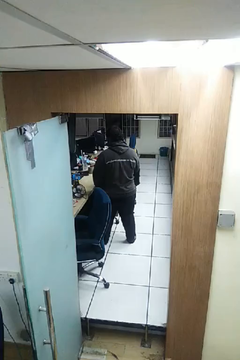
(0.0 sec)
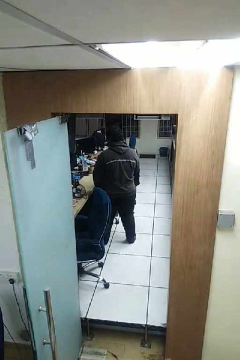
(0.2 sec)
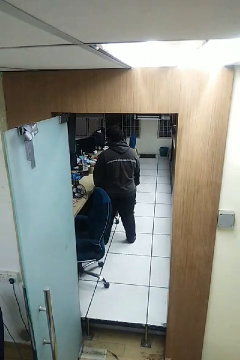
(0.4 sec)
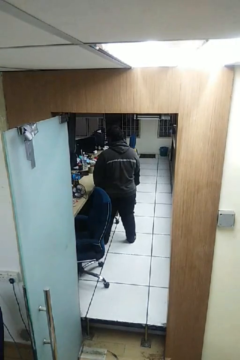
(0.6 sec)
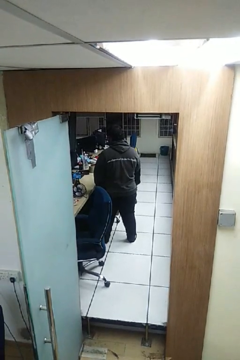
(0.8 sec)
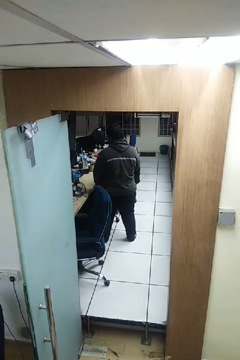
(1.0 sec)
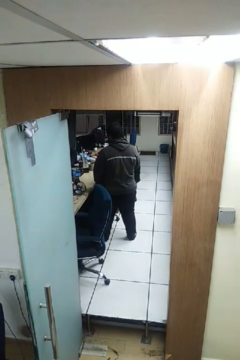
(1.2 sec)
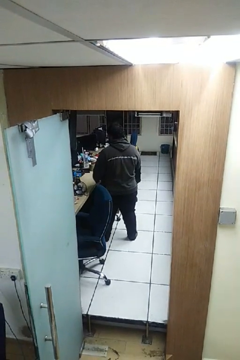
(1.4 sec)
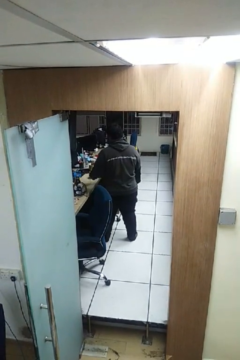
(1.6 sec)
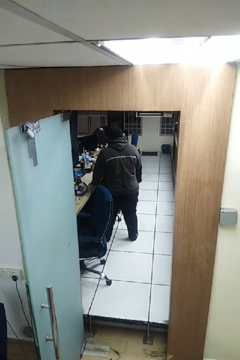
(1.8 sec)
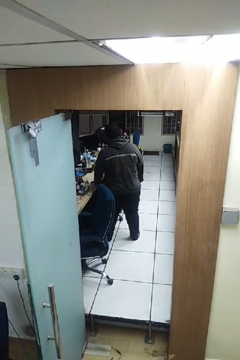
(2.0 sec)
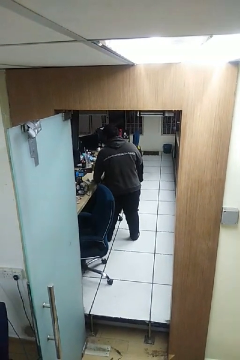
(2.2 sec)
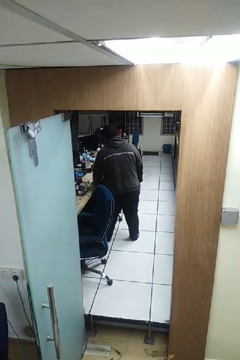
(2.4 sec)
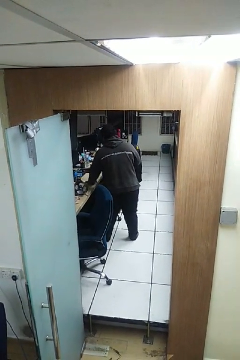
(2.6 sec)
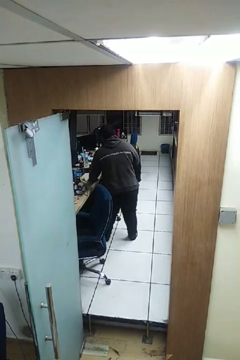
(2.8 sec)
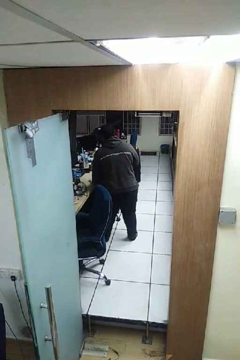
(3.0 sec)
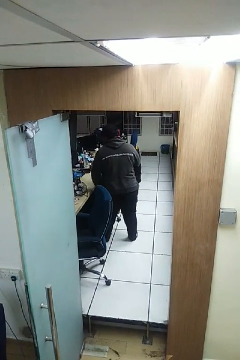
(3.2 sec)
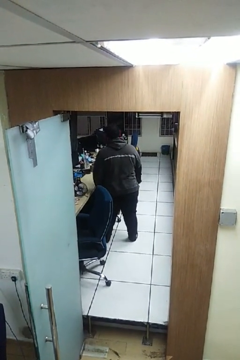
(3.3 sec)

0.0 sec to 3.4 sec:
person cleans table with rag

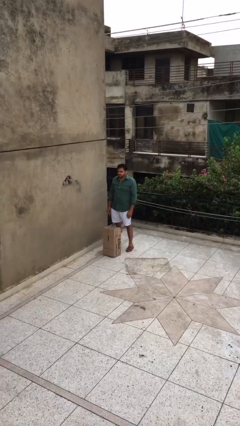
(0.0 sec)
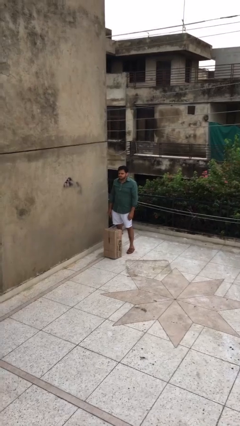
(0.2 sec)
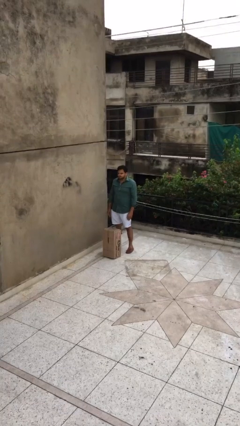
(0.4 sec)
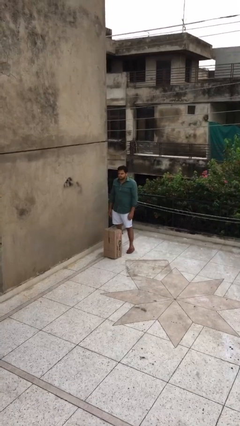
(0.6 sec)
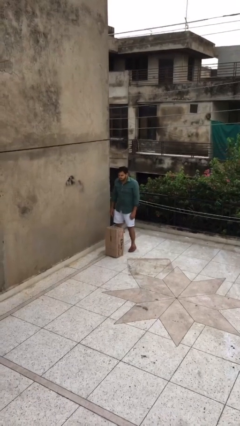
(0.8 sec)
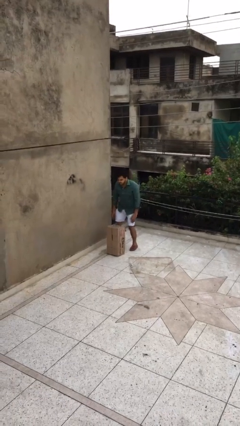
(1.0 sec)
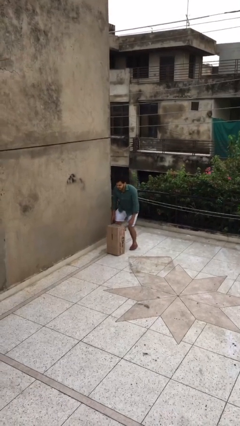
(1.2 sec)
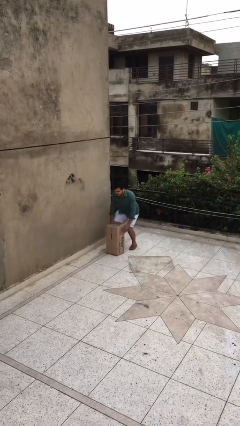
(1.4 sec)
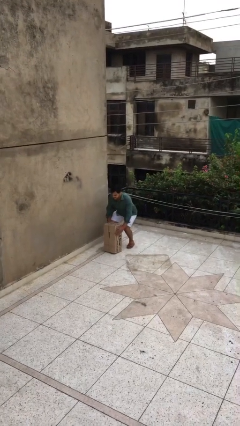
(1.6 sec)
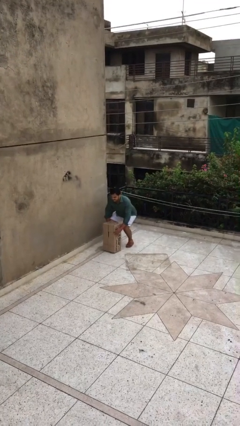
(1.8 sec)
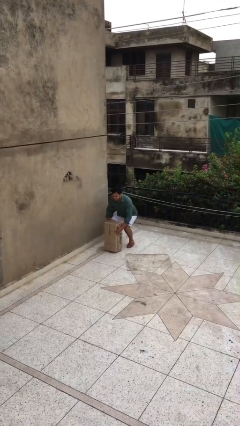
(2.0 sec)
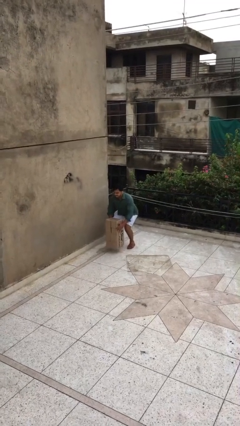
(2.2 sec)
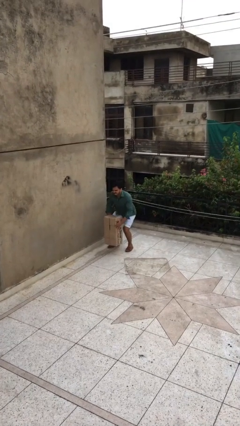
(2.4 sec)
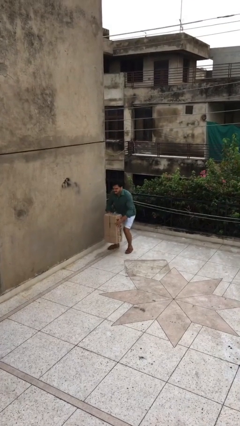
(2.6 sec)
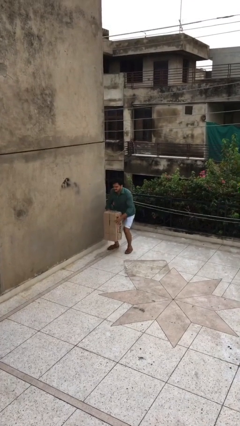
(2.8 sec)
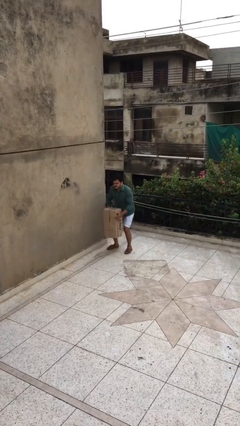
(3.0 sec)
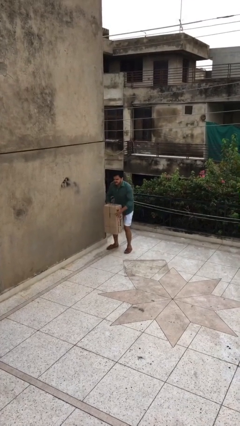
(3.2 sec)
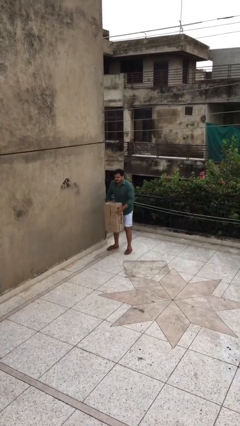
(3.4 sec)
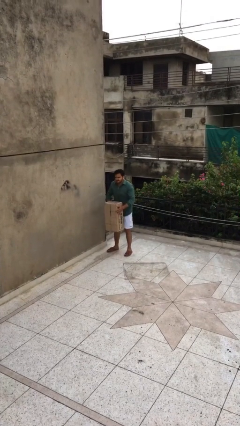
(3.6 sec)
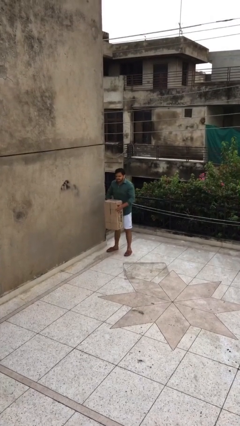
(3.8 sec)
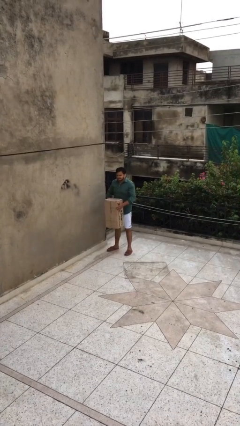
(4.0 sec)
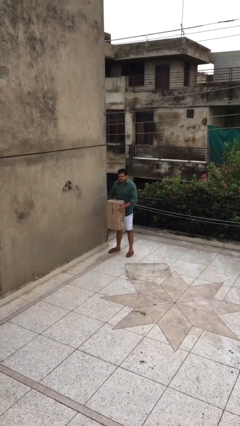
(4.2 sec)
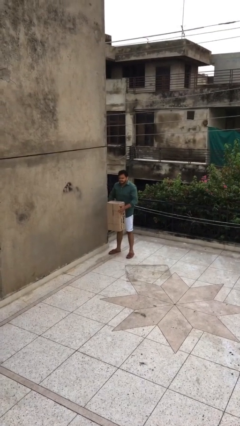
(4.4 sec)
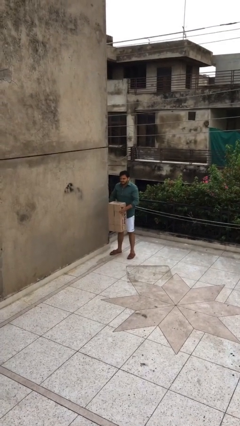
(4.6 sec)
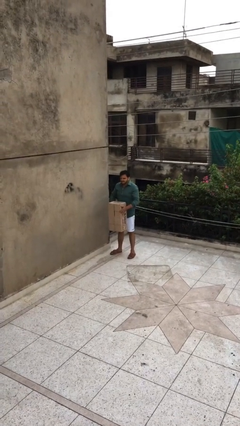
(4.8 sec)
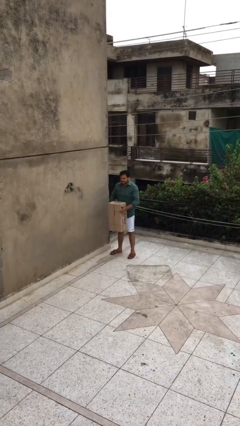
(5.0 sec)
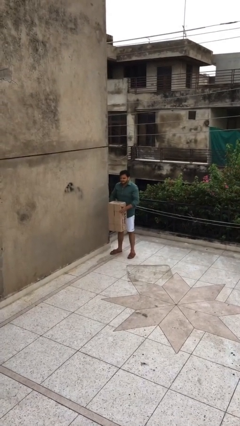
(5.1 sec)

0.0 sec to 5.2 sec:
person picks up object from floor

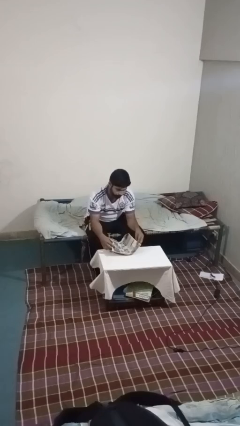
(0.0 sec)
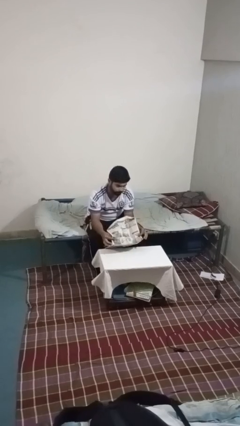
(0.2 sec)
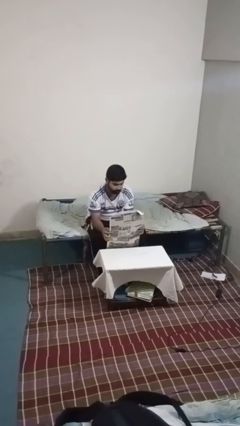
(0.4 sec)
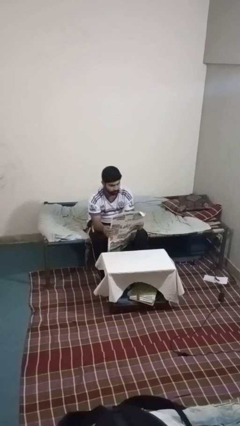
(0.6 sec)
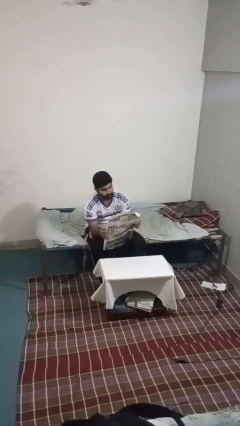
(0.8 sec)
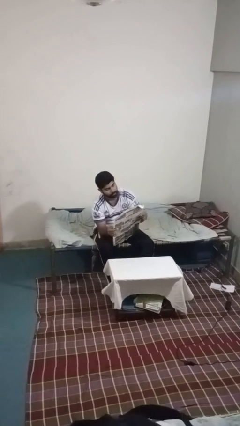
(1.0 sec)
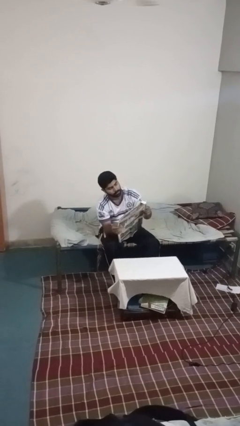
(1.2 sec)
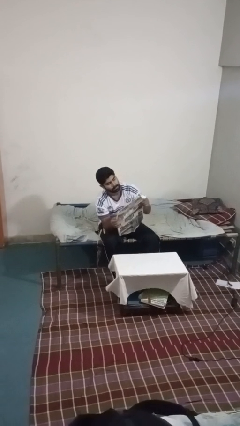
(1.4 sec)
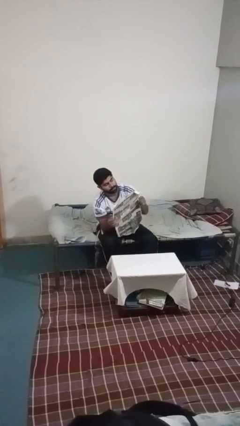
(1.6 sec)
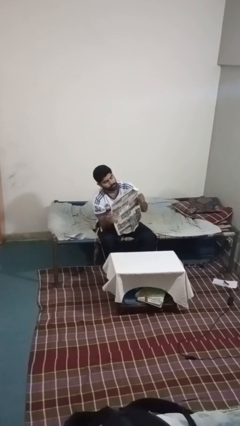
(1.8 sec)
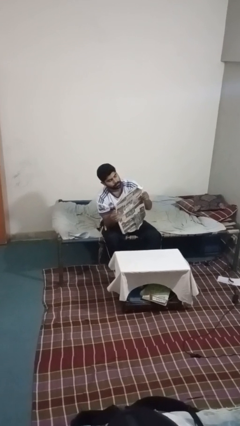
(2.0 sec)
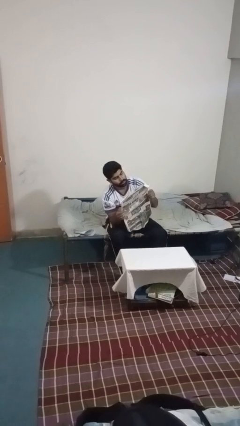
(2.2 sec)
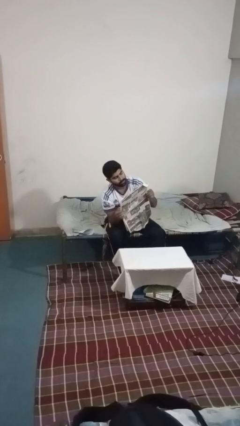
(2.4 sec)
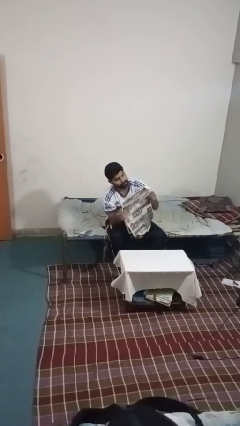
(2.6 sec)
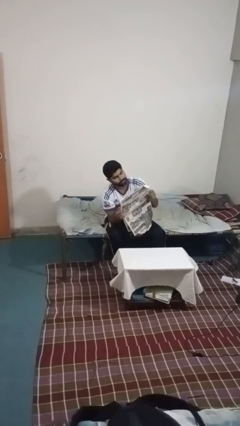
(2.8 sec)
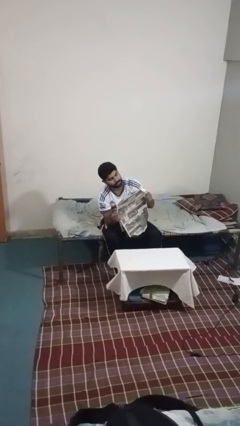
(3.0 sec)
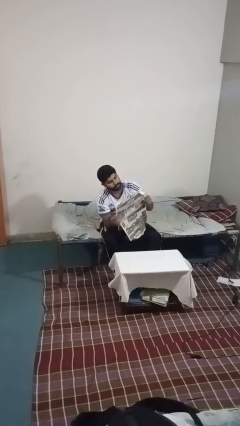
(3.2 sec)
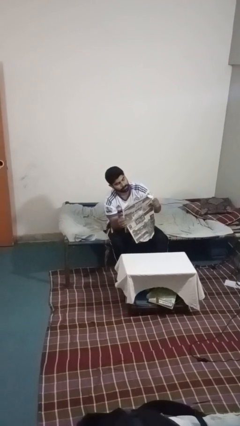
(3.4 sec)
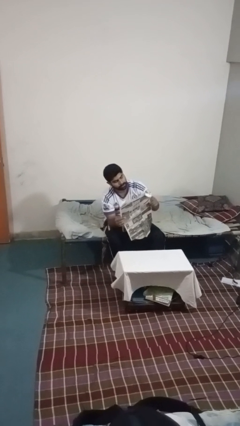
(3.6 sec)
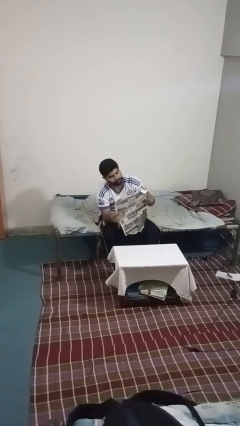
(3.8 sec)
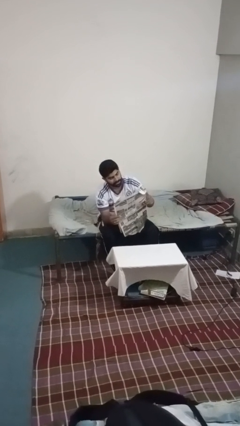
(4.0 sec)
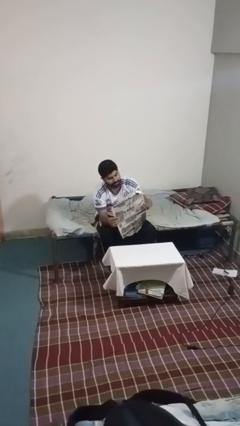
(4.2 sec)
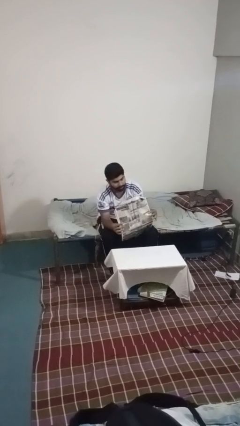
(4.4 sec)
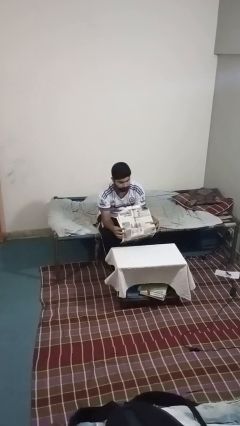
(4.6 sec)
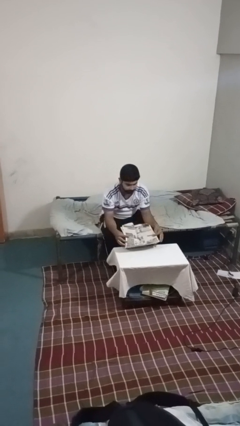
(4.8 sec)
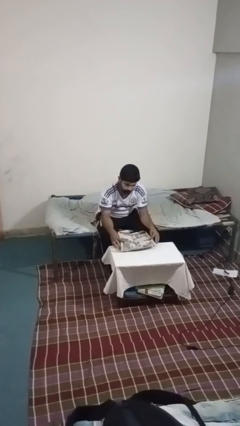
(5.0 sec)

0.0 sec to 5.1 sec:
person reads newspaper

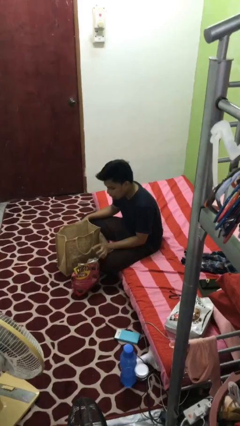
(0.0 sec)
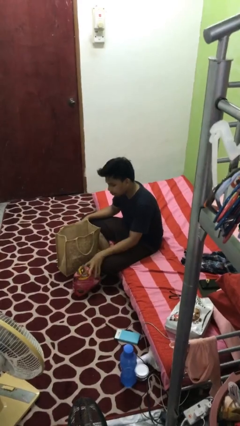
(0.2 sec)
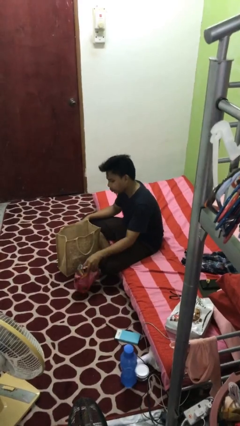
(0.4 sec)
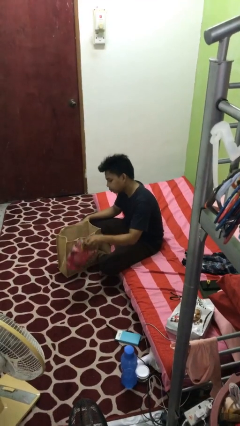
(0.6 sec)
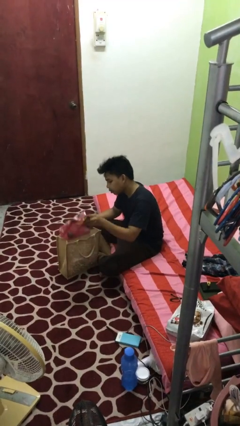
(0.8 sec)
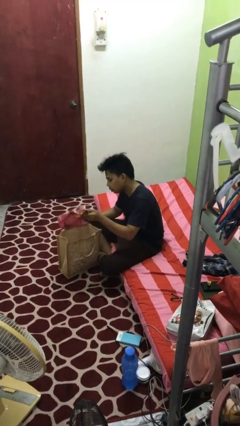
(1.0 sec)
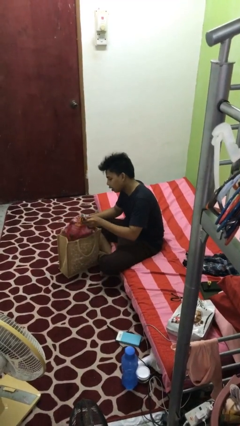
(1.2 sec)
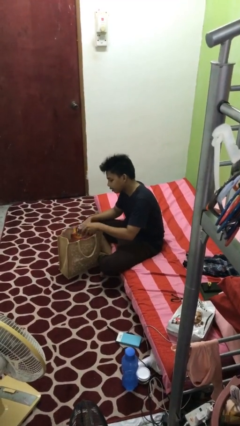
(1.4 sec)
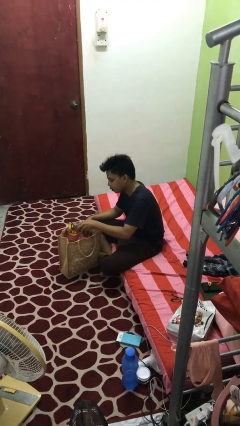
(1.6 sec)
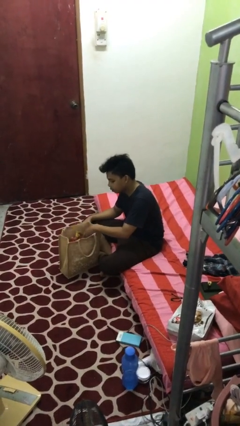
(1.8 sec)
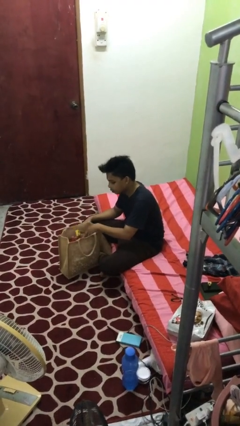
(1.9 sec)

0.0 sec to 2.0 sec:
person puts object into bag

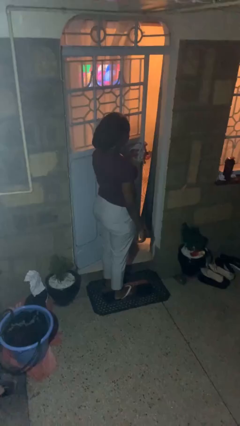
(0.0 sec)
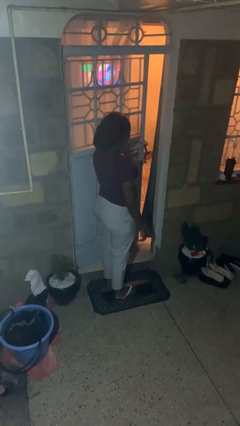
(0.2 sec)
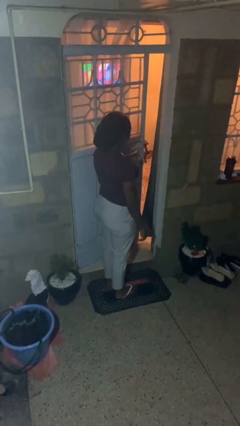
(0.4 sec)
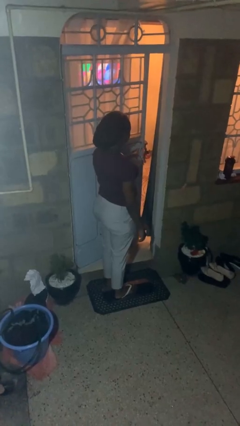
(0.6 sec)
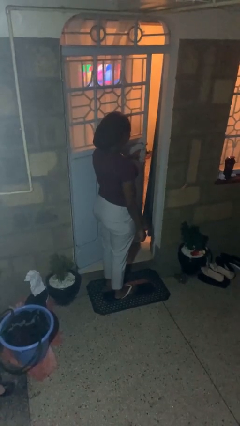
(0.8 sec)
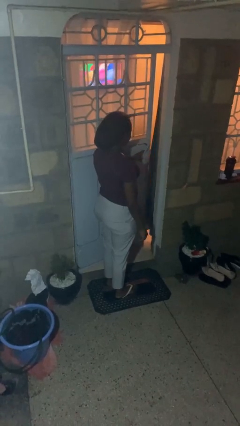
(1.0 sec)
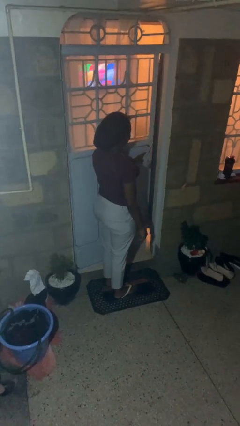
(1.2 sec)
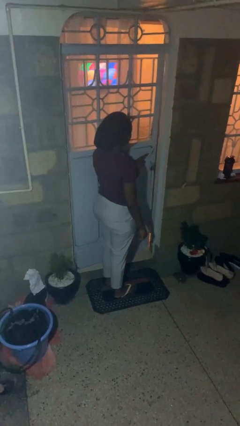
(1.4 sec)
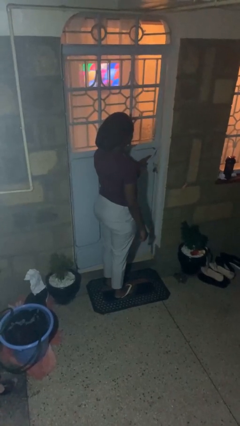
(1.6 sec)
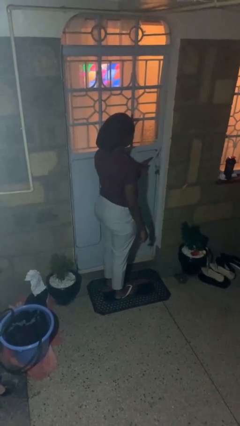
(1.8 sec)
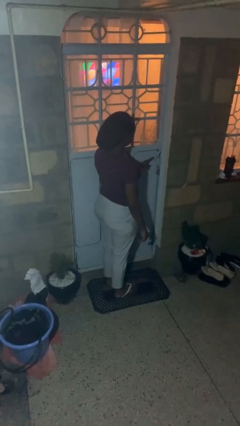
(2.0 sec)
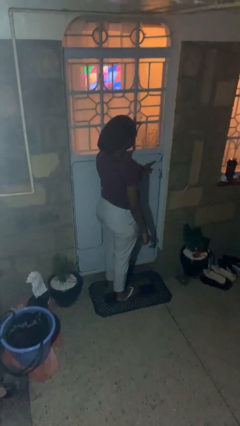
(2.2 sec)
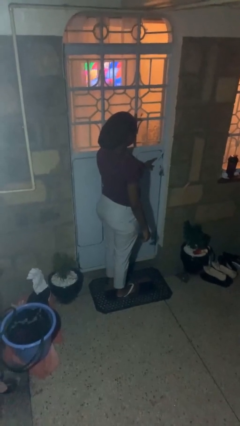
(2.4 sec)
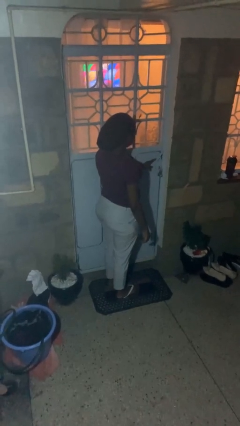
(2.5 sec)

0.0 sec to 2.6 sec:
person closes facility door
